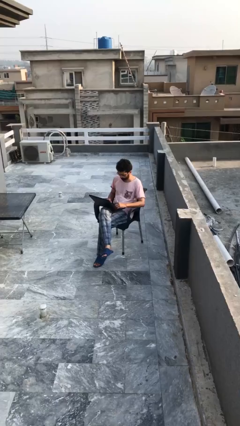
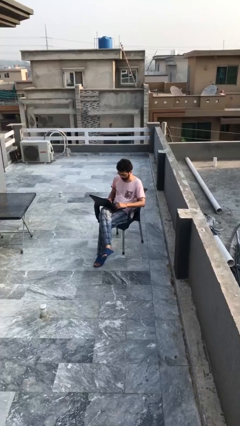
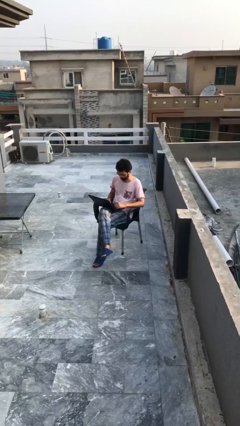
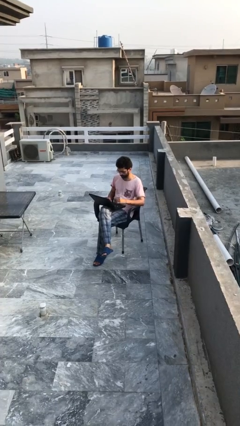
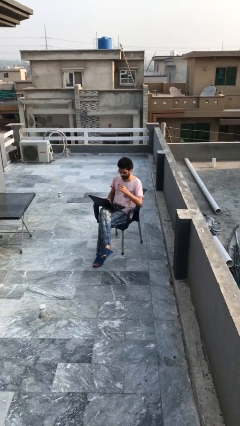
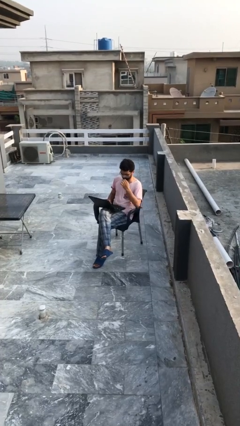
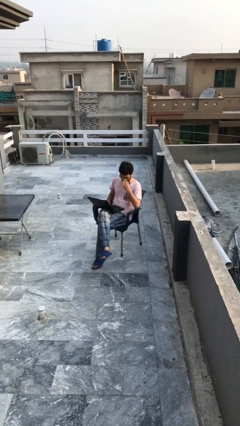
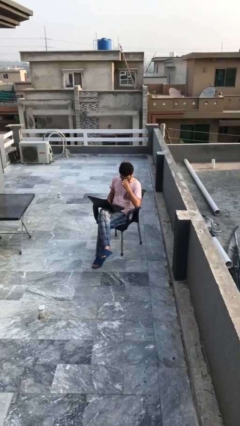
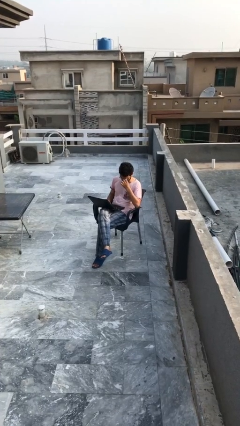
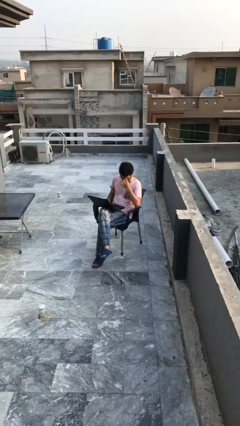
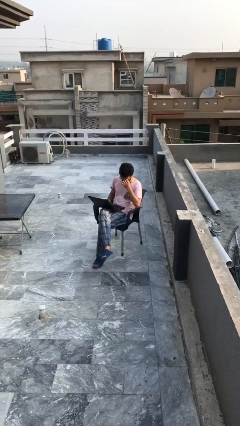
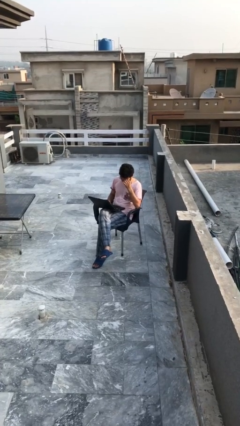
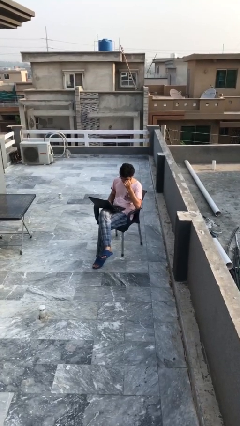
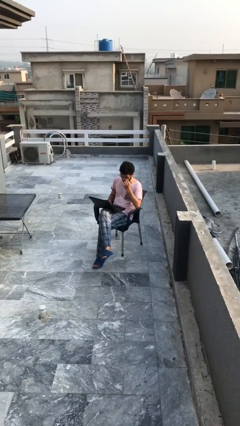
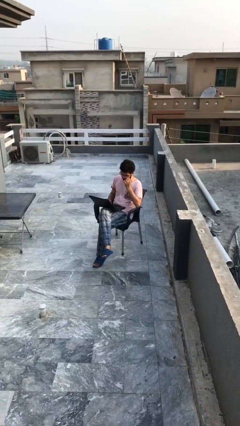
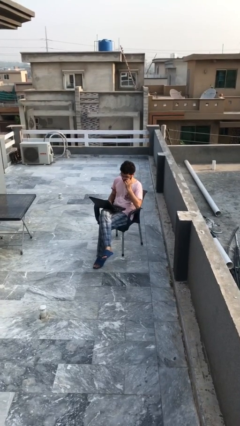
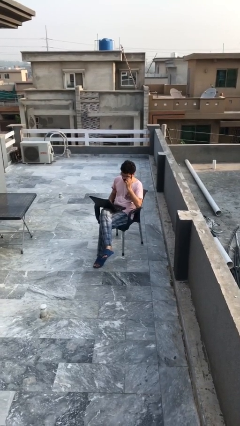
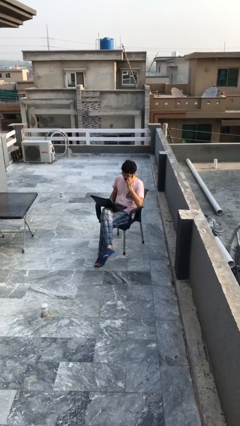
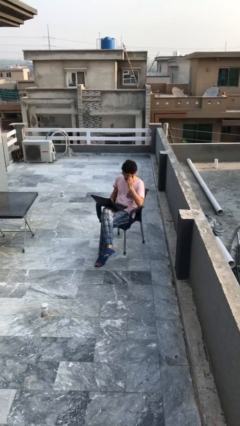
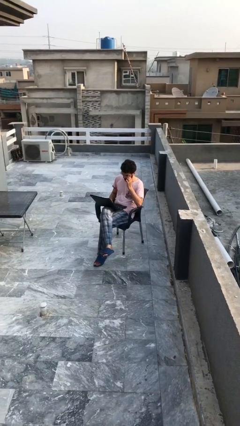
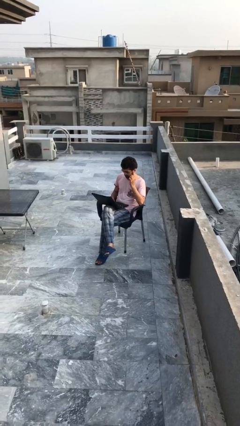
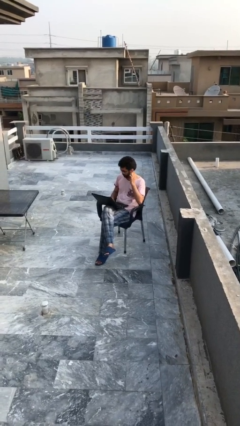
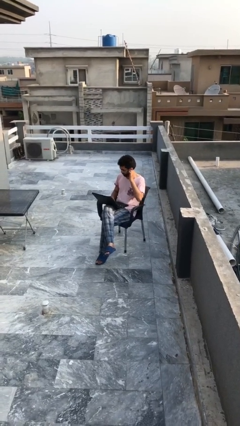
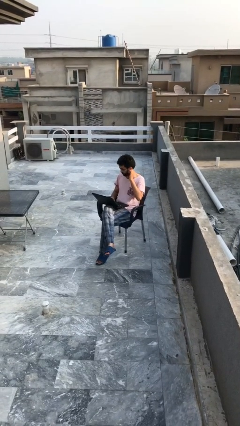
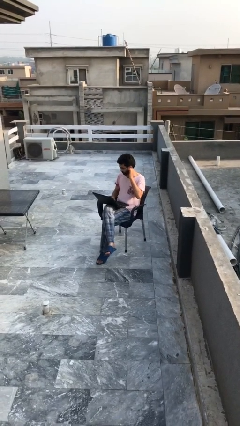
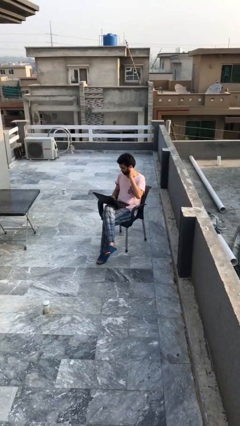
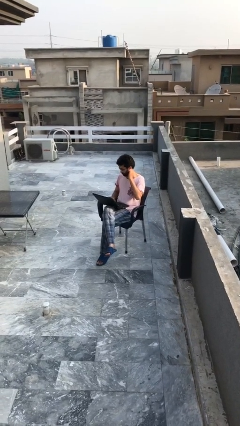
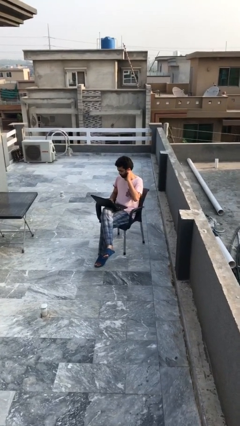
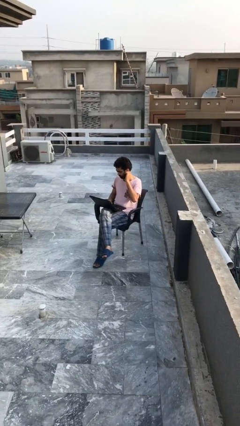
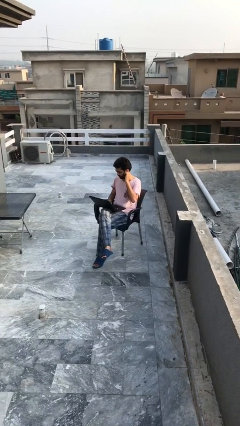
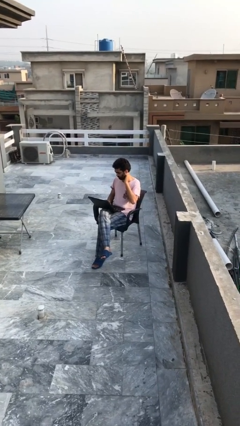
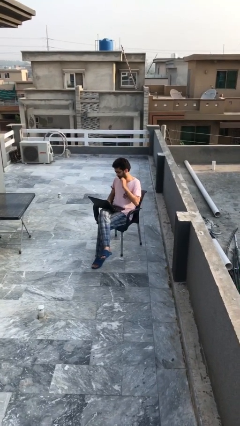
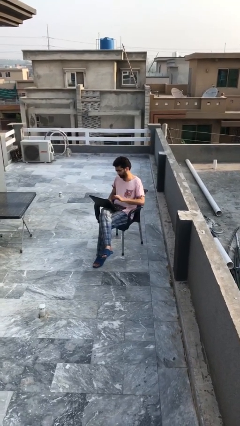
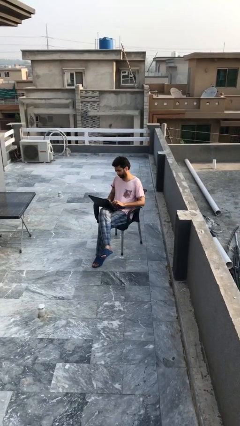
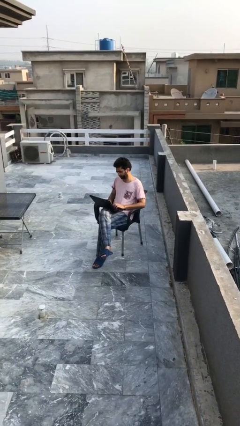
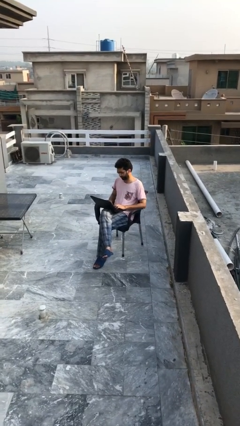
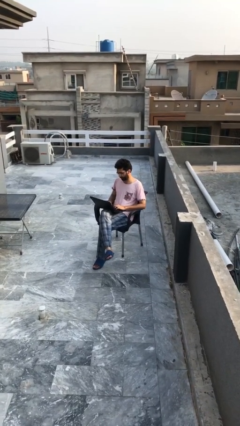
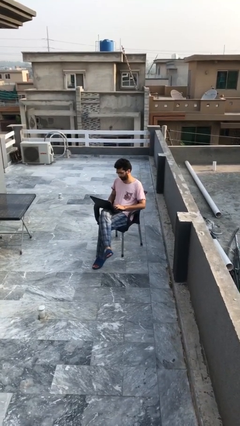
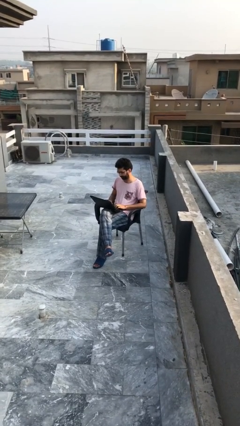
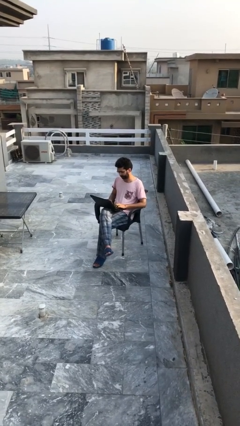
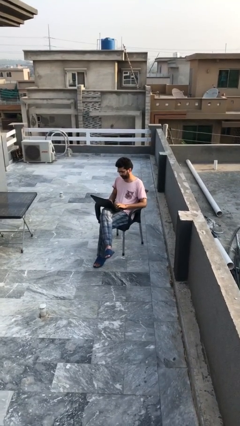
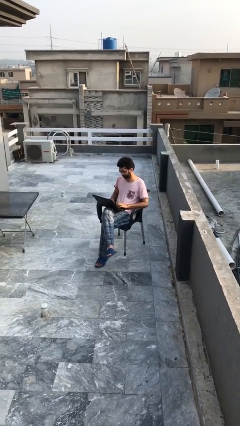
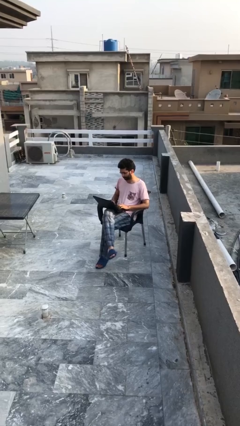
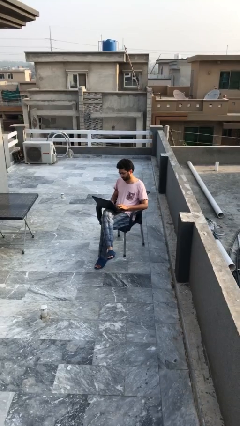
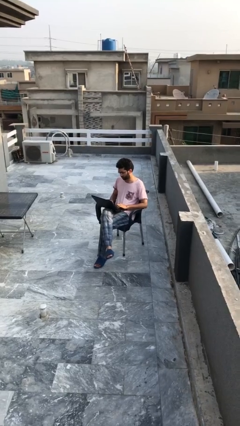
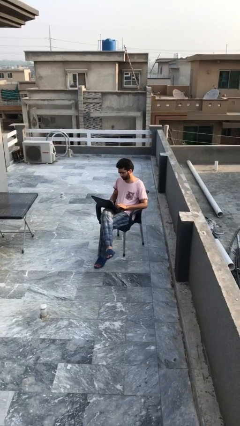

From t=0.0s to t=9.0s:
person interacts with laptop

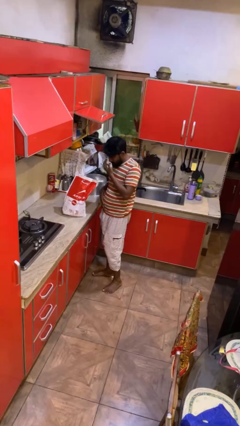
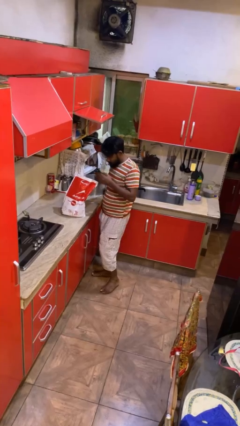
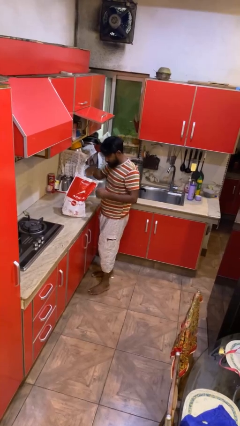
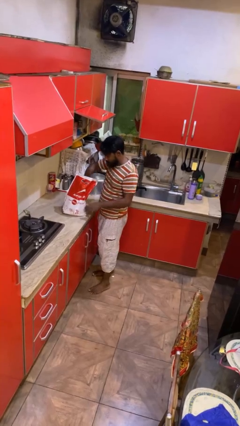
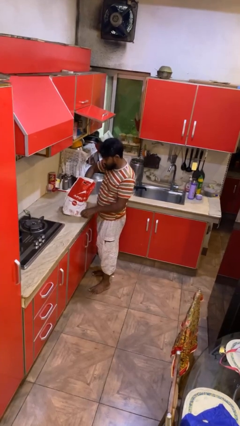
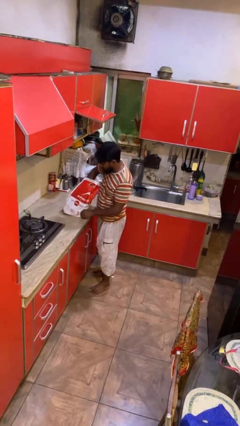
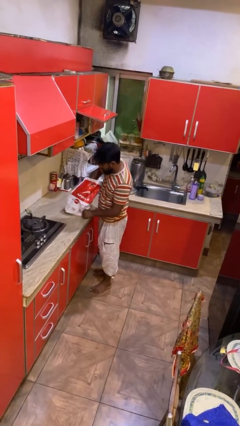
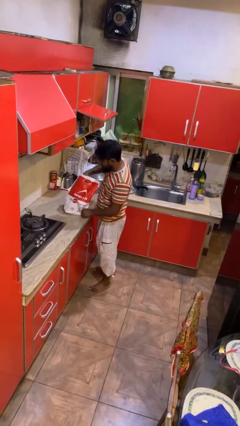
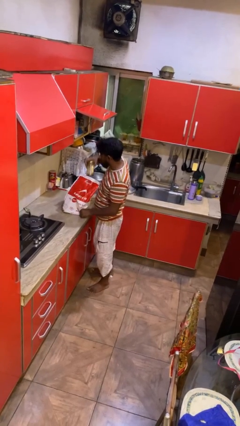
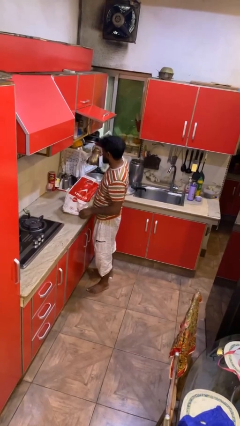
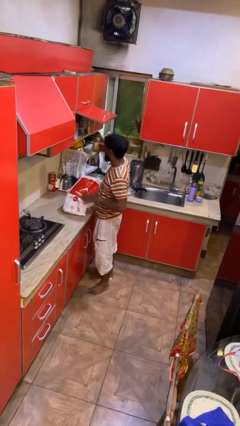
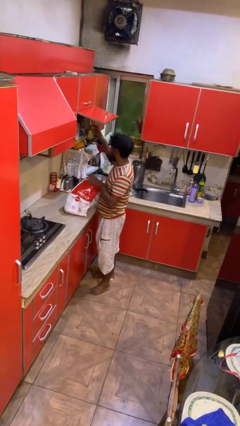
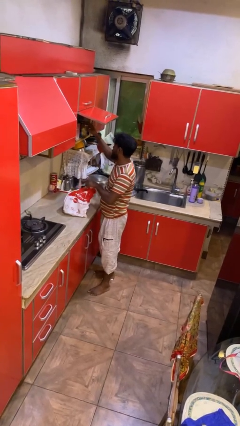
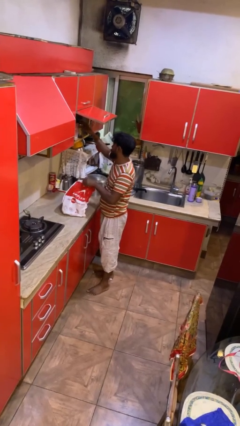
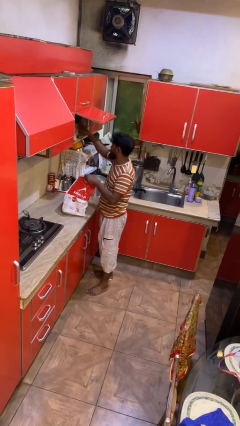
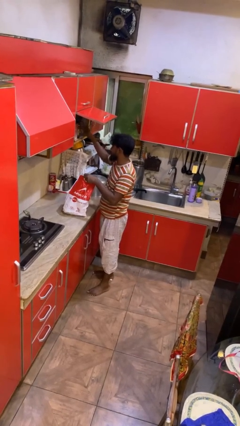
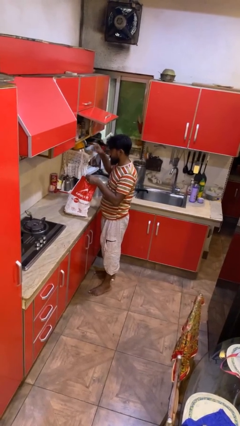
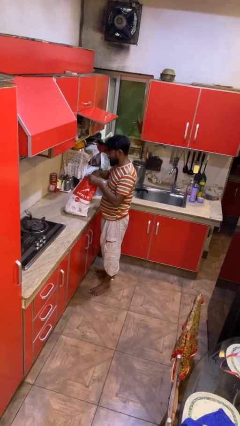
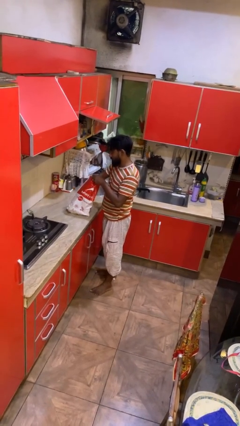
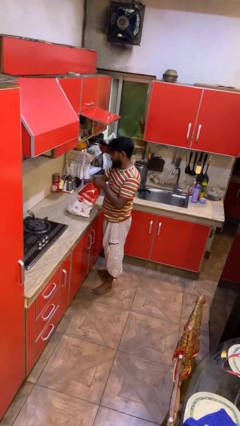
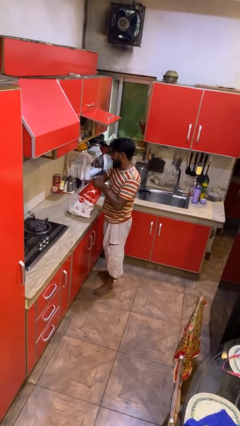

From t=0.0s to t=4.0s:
person loads groceries into cabinet

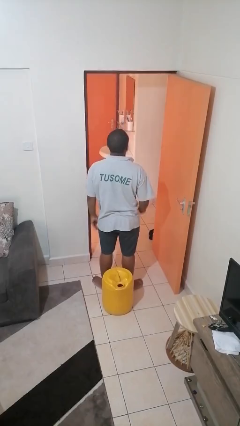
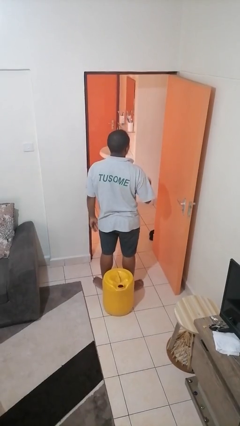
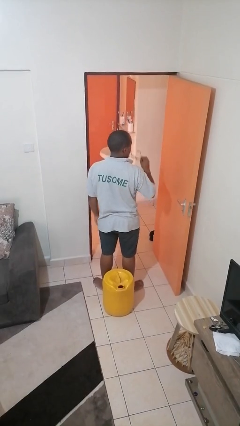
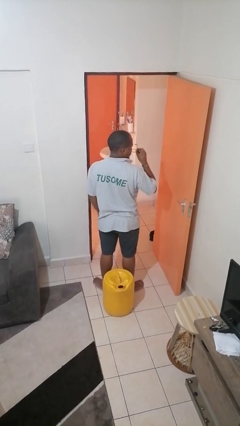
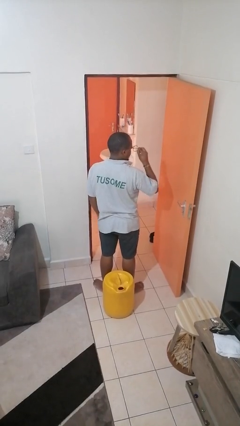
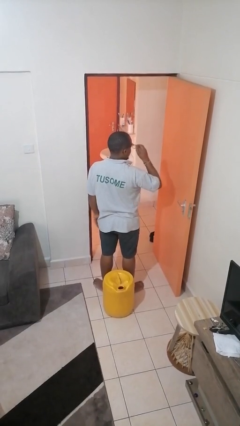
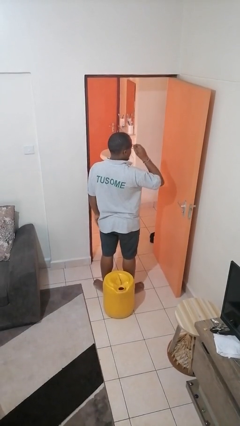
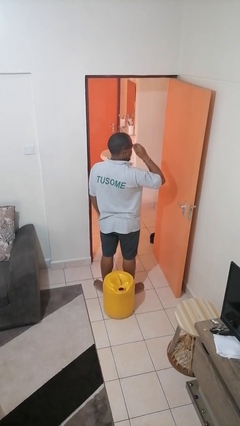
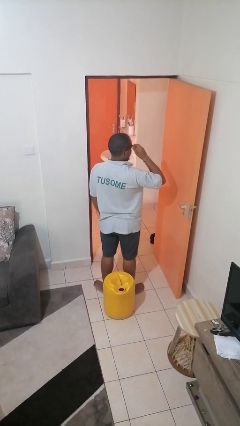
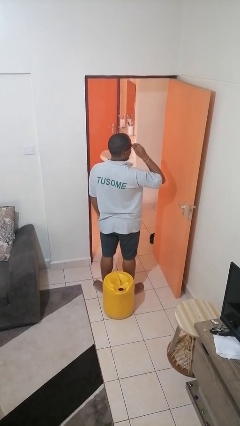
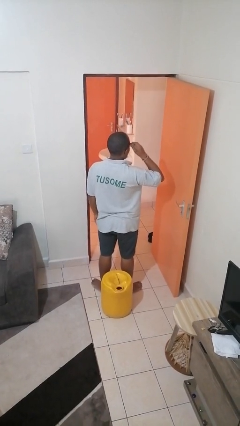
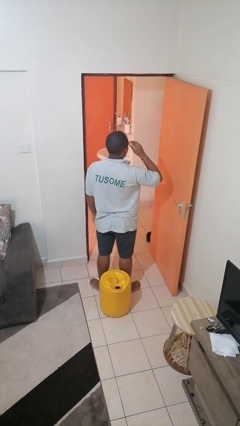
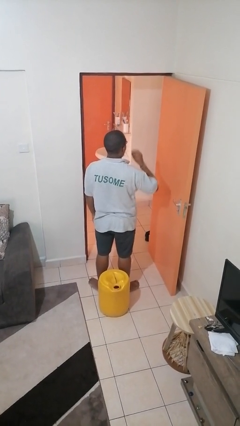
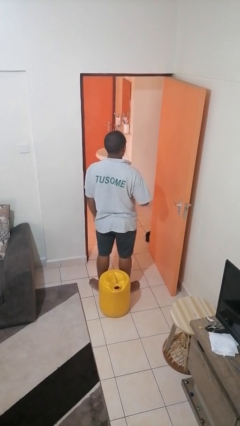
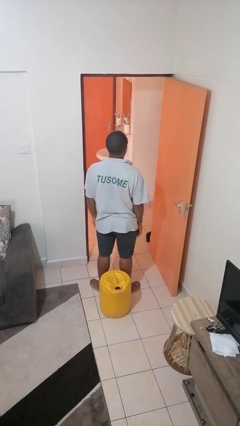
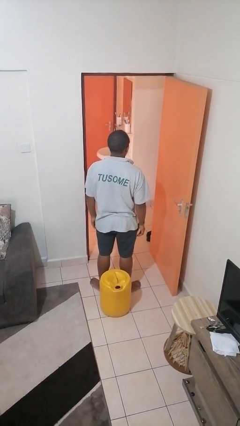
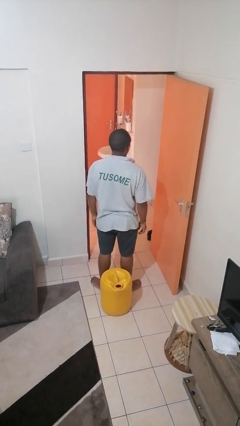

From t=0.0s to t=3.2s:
person puts on glasses

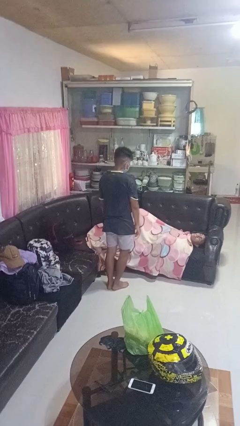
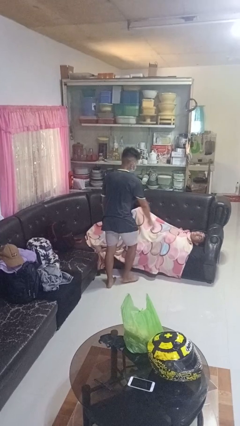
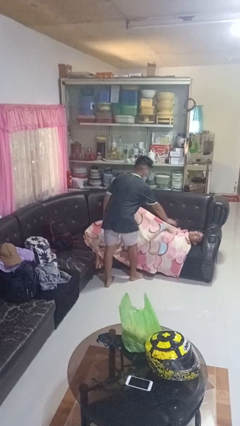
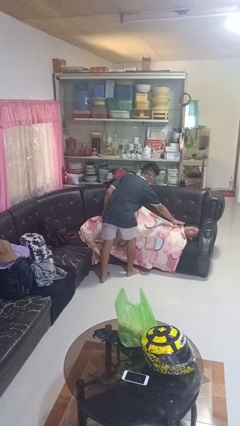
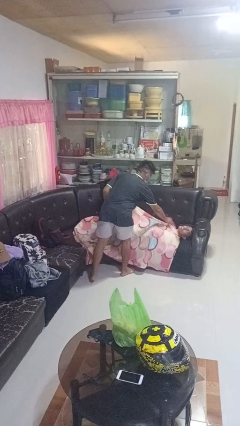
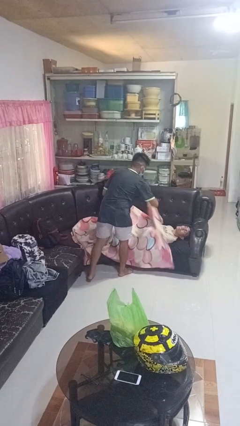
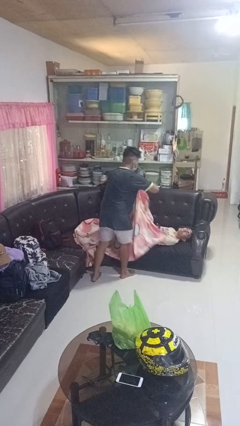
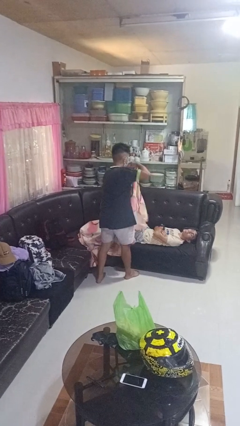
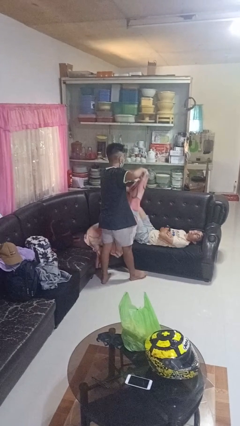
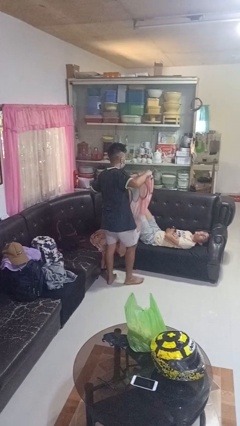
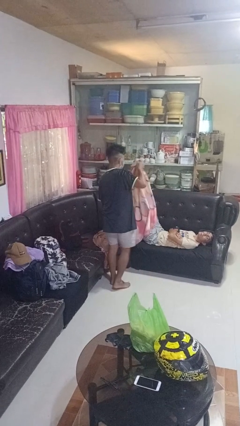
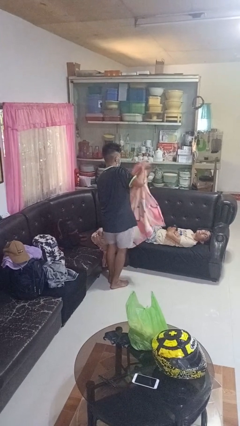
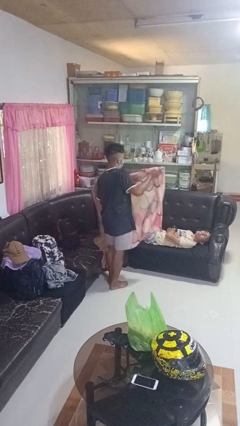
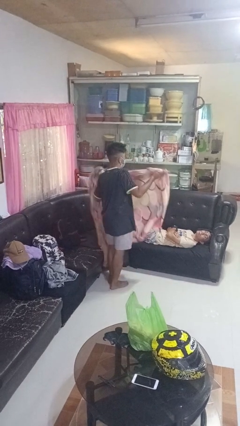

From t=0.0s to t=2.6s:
person uncovers friend with blanket
